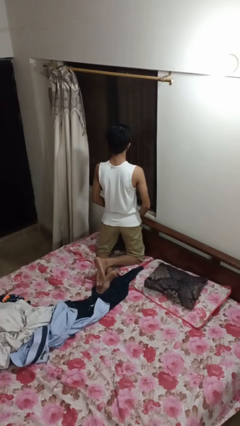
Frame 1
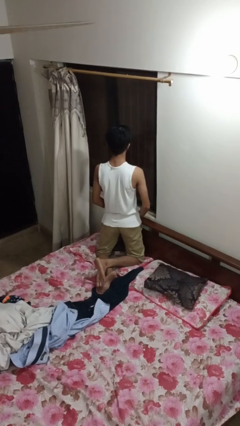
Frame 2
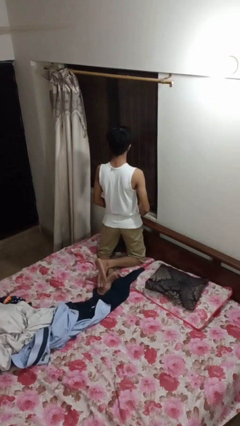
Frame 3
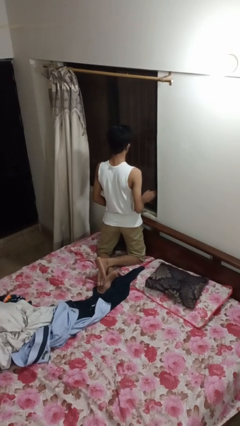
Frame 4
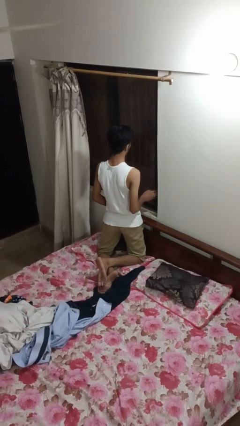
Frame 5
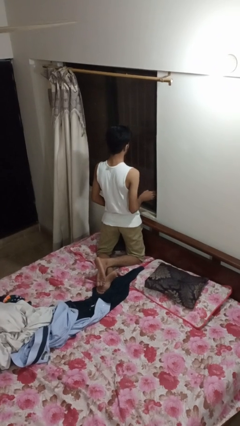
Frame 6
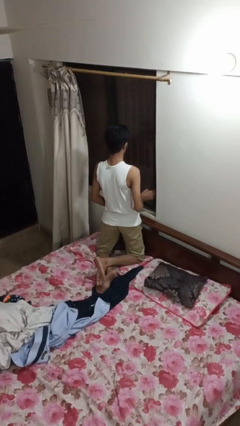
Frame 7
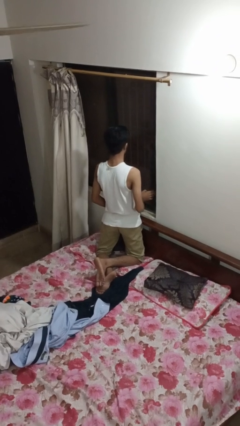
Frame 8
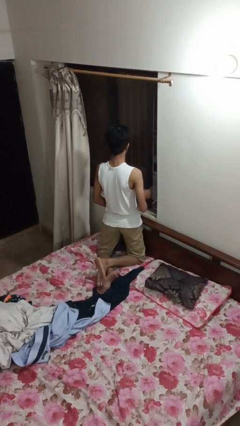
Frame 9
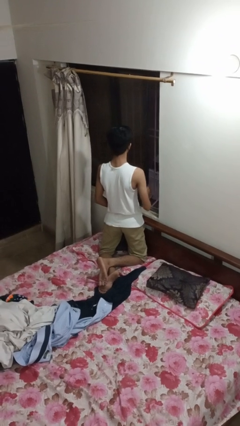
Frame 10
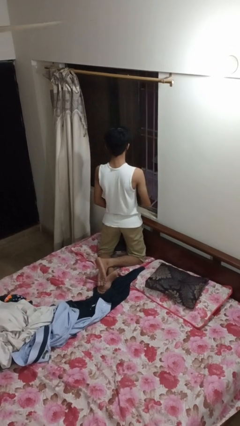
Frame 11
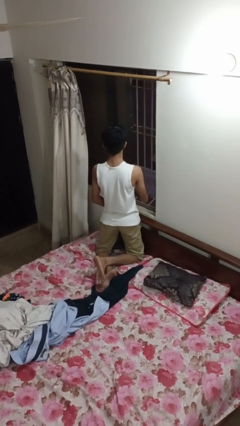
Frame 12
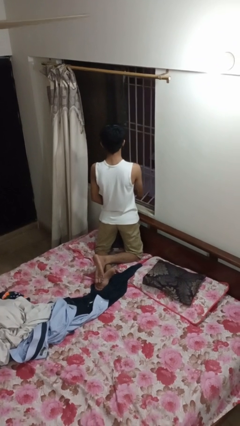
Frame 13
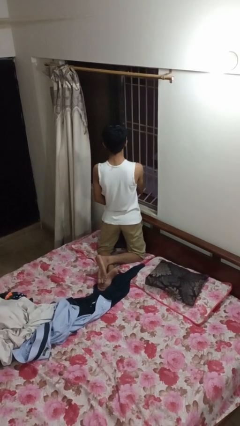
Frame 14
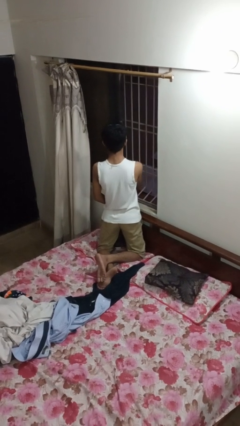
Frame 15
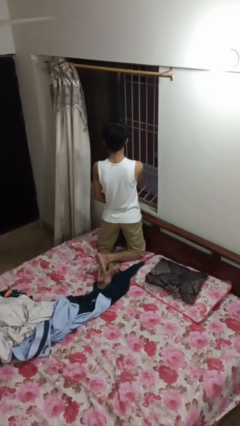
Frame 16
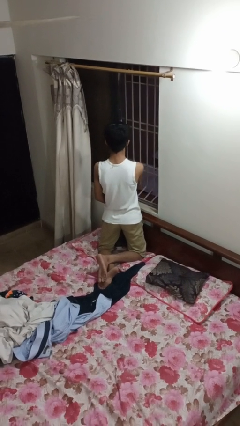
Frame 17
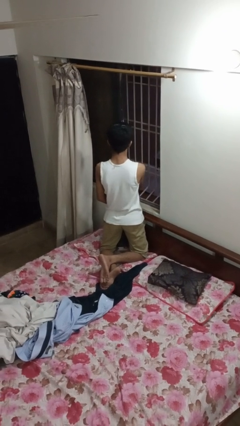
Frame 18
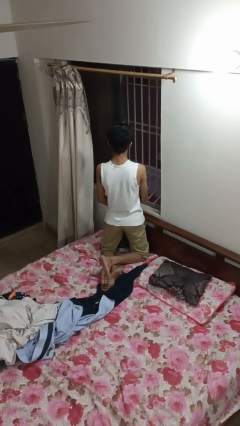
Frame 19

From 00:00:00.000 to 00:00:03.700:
person opens home window

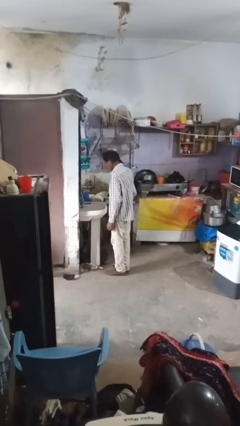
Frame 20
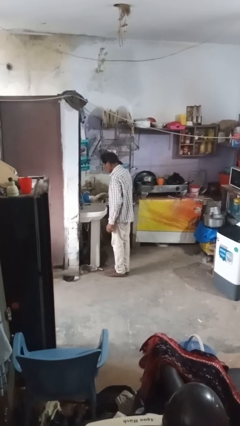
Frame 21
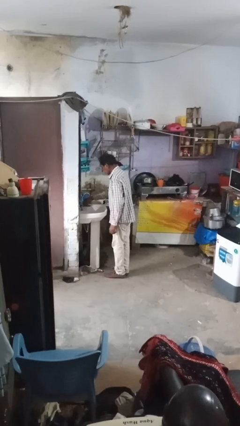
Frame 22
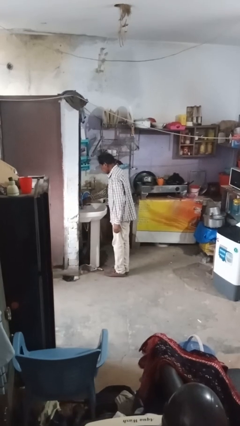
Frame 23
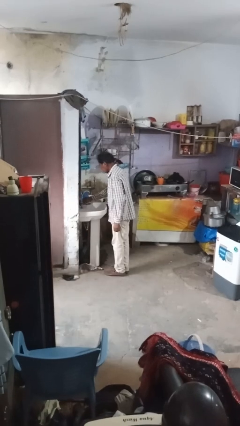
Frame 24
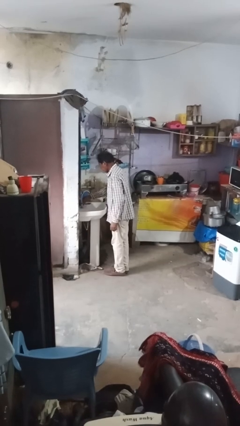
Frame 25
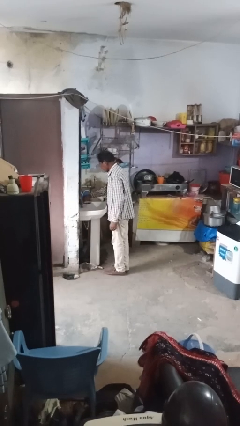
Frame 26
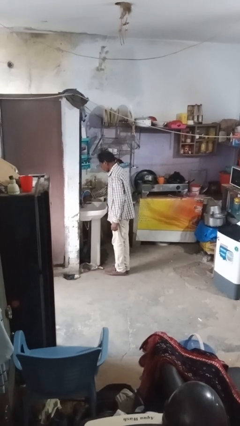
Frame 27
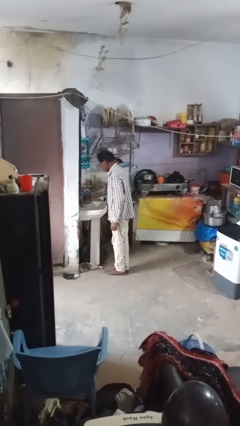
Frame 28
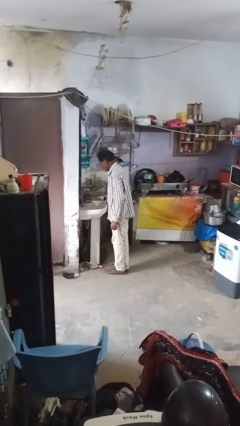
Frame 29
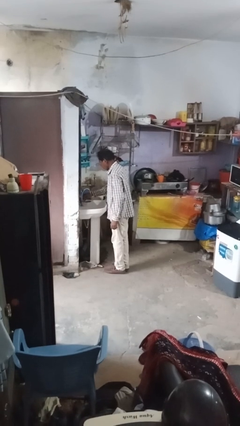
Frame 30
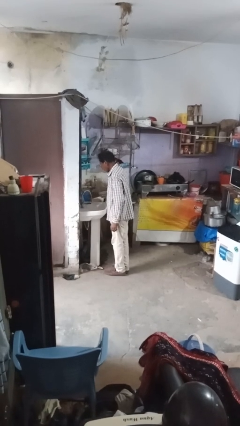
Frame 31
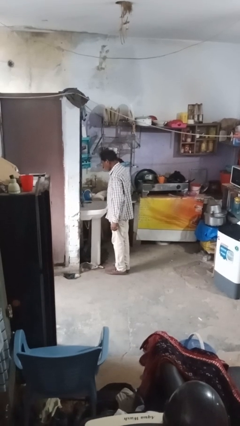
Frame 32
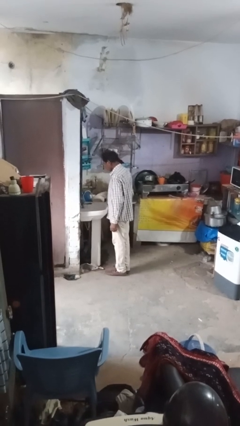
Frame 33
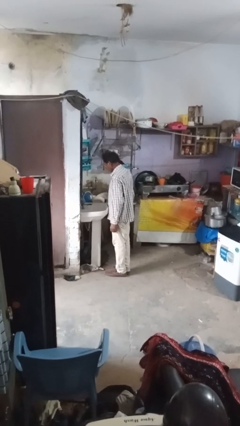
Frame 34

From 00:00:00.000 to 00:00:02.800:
person turns on faucet

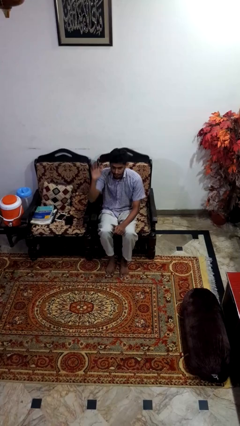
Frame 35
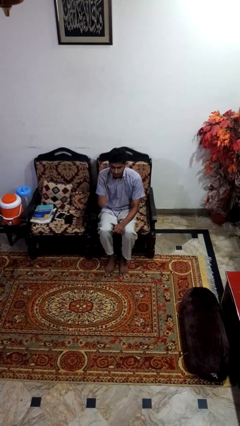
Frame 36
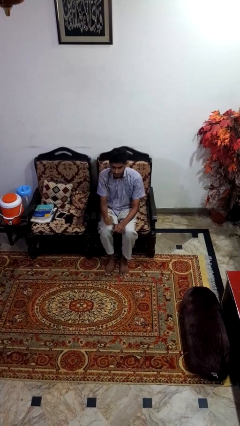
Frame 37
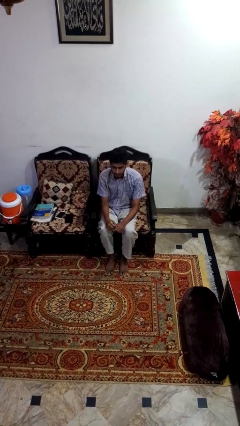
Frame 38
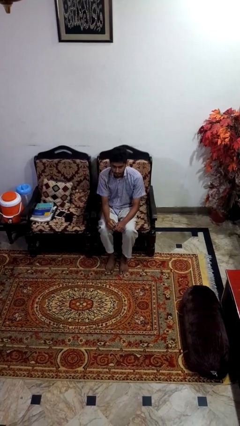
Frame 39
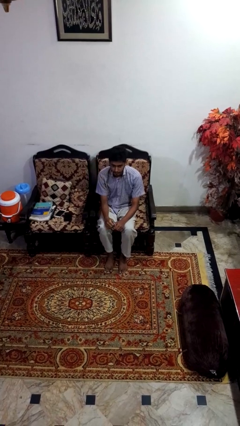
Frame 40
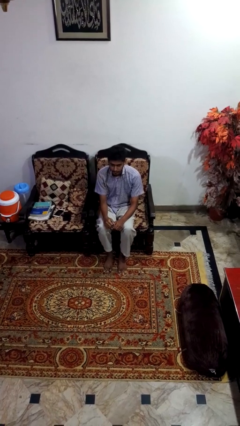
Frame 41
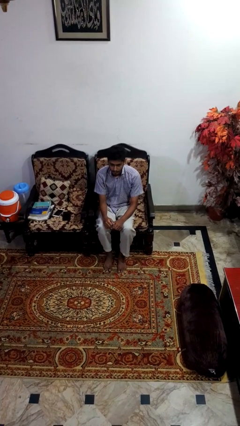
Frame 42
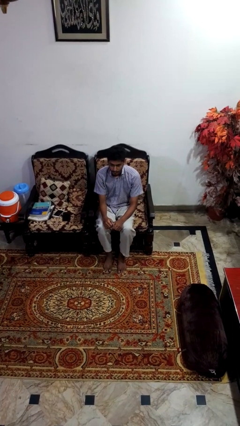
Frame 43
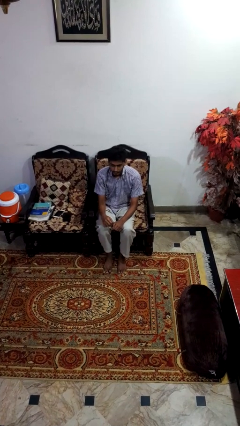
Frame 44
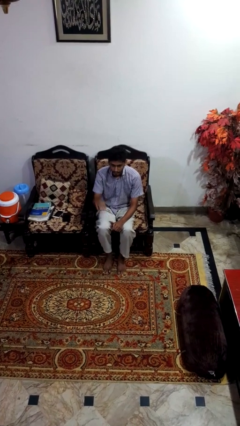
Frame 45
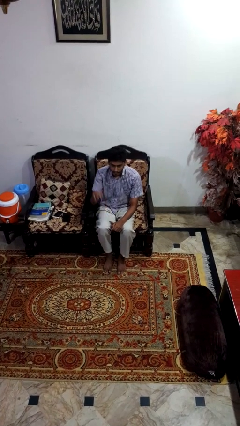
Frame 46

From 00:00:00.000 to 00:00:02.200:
person gestures lower hand

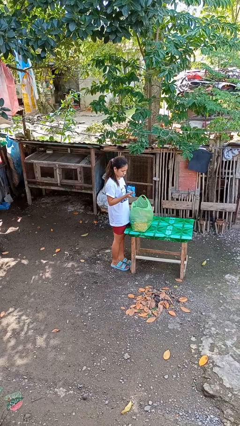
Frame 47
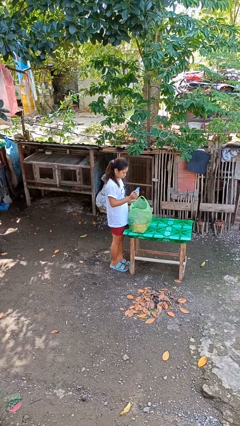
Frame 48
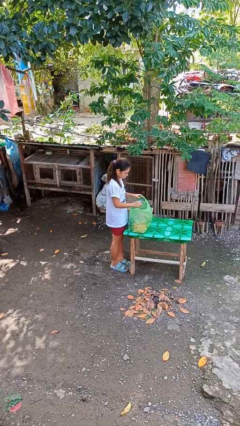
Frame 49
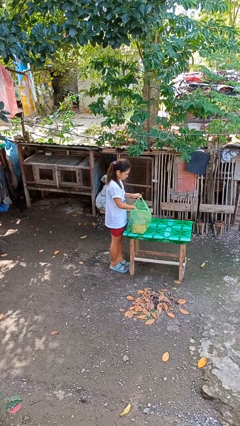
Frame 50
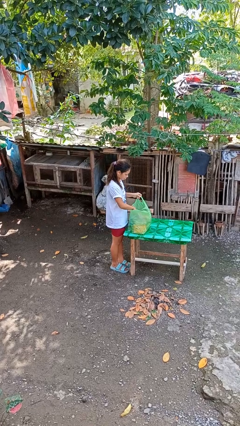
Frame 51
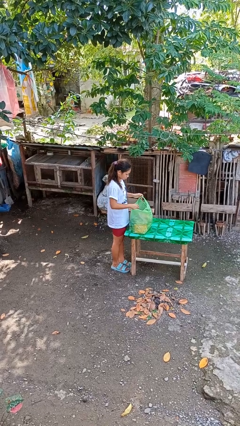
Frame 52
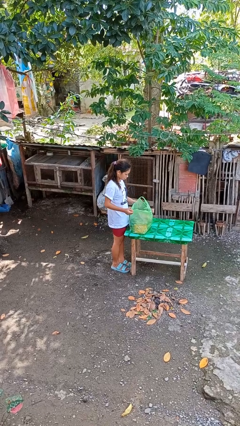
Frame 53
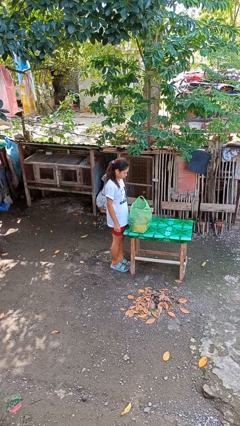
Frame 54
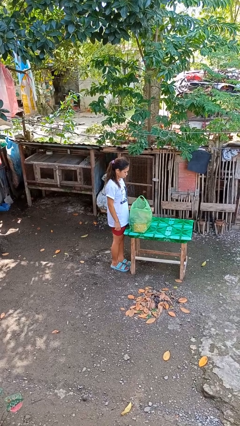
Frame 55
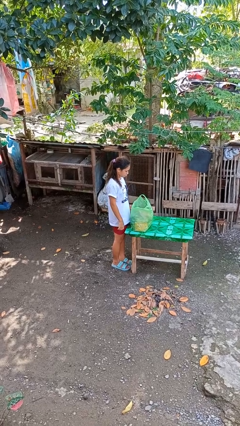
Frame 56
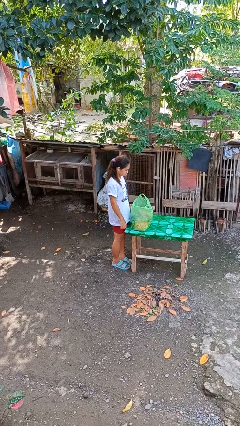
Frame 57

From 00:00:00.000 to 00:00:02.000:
person puts object into bag

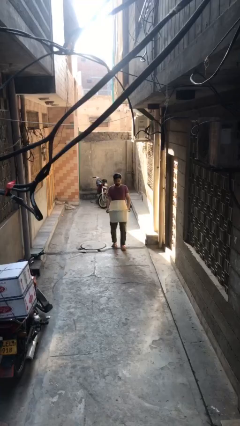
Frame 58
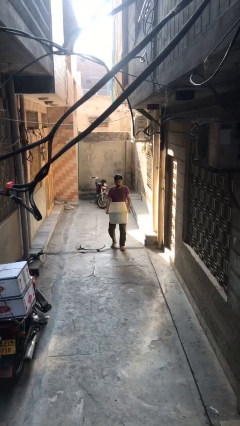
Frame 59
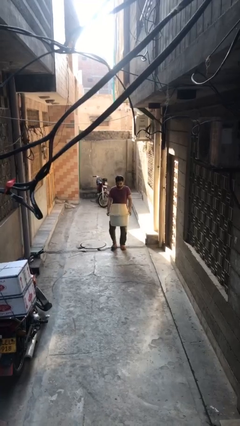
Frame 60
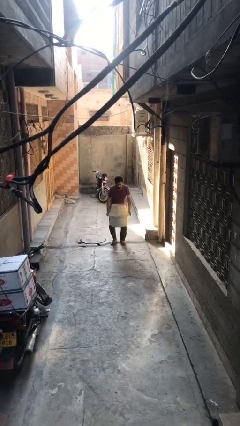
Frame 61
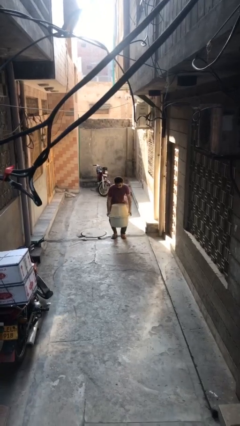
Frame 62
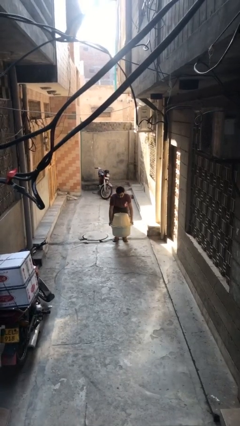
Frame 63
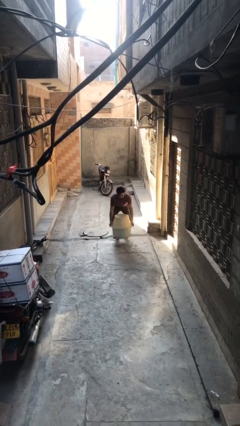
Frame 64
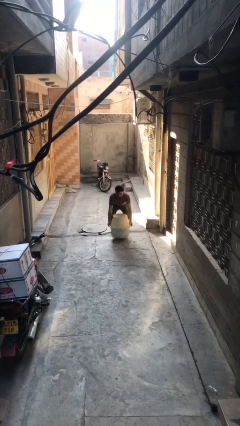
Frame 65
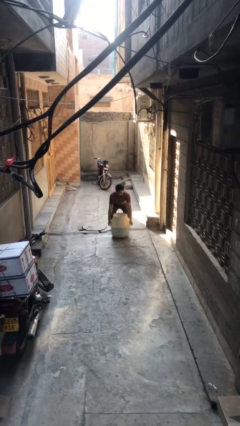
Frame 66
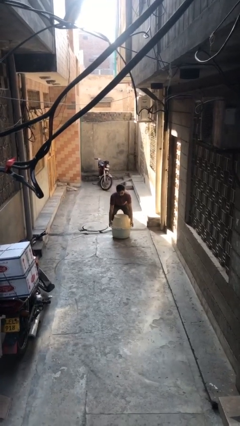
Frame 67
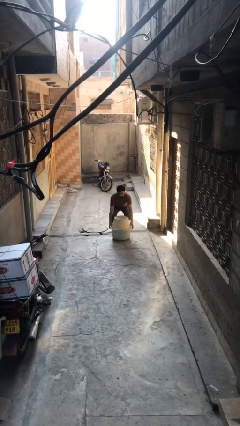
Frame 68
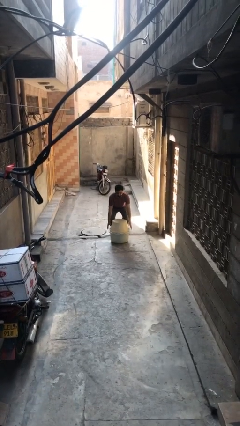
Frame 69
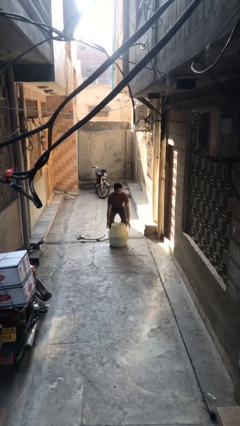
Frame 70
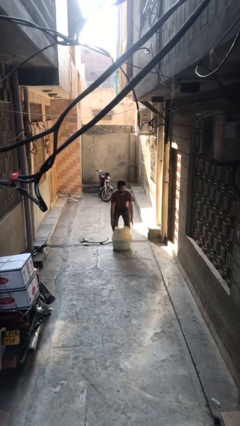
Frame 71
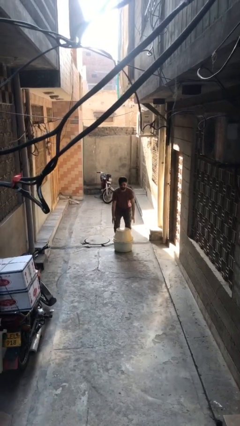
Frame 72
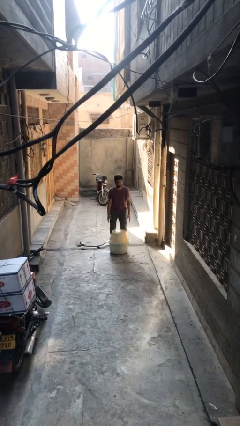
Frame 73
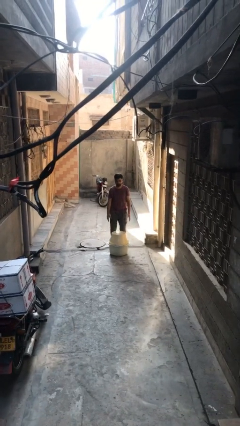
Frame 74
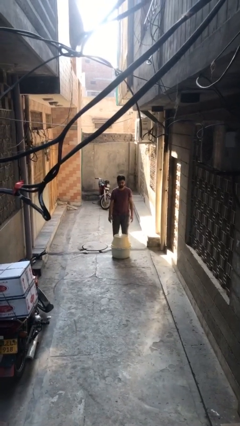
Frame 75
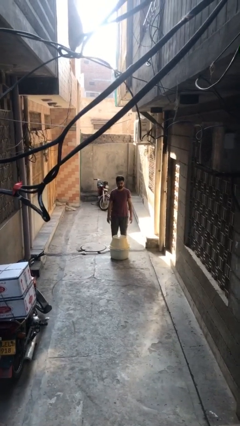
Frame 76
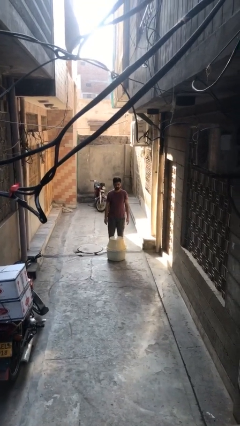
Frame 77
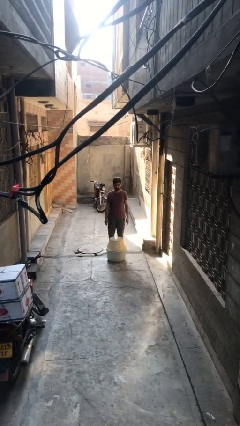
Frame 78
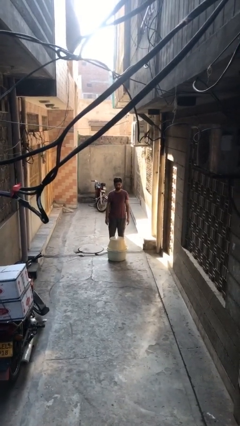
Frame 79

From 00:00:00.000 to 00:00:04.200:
person puts down object on floor

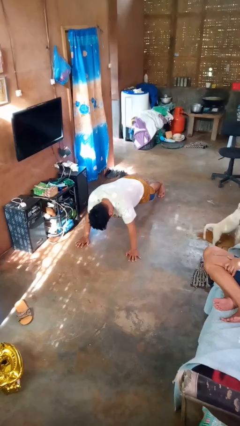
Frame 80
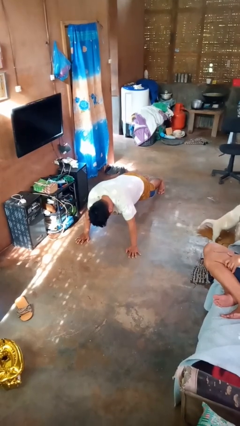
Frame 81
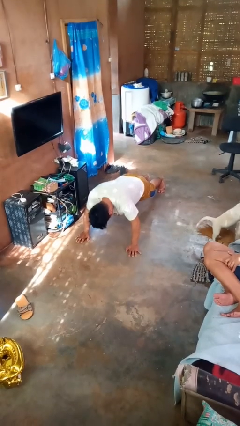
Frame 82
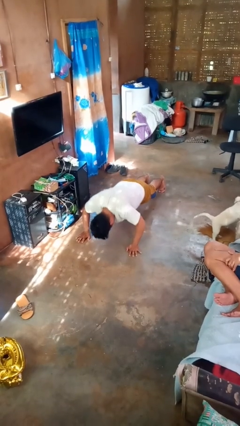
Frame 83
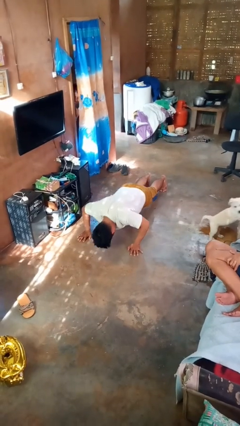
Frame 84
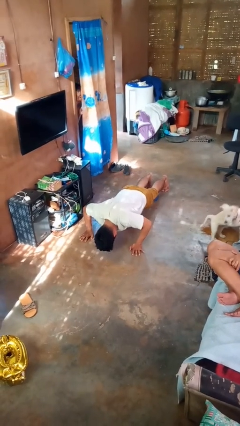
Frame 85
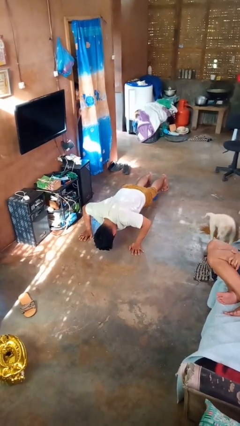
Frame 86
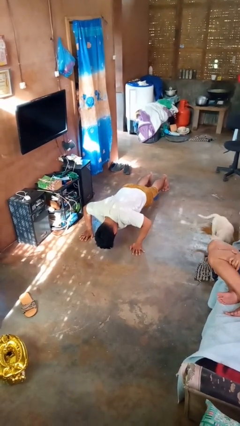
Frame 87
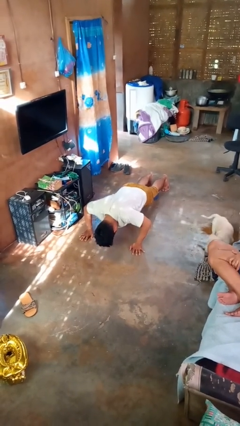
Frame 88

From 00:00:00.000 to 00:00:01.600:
person exercises with pushup

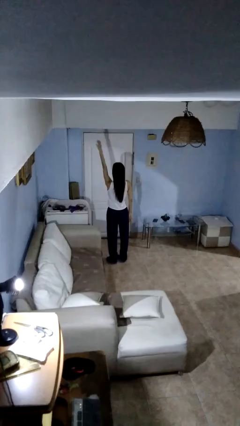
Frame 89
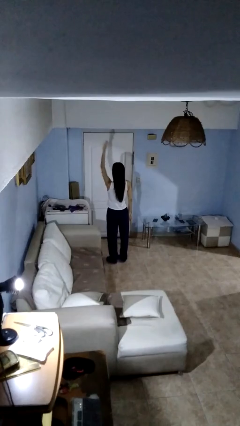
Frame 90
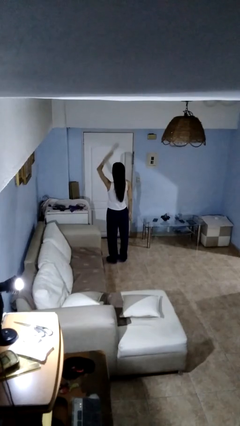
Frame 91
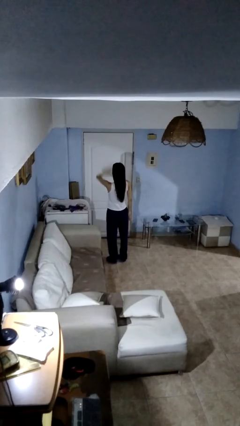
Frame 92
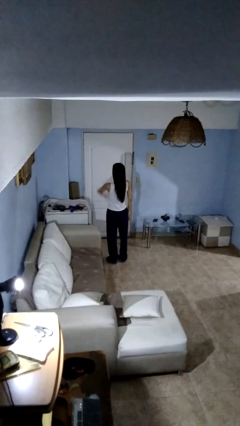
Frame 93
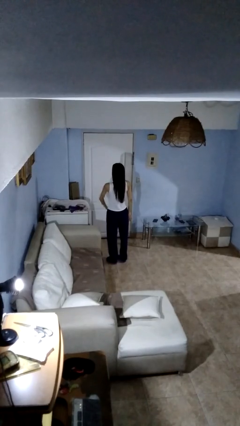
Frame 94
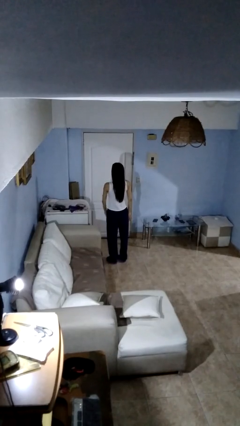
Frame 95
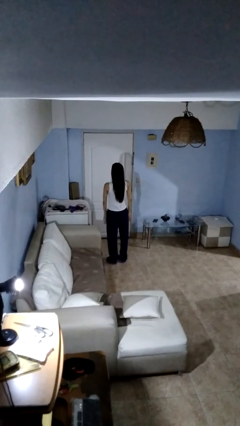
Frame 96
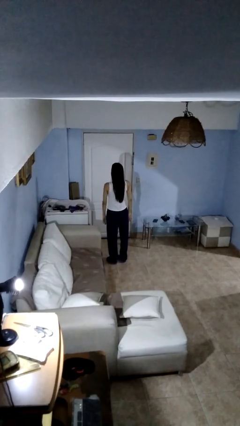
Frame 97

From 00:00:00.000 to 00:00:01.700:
person gestures swipe down
